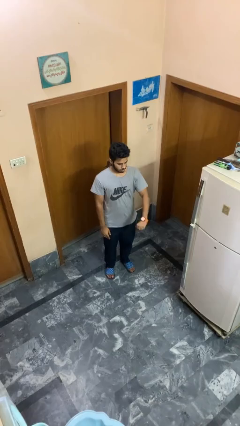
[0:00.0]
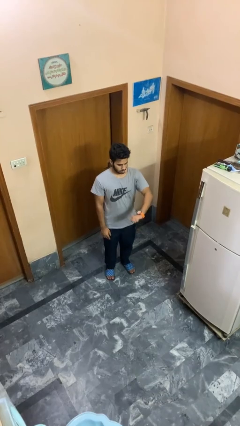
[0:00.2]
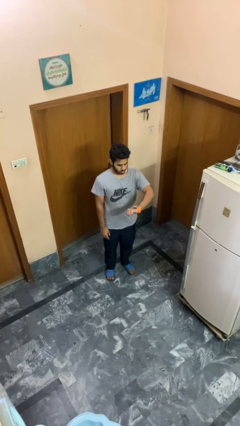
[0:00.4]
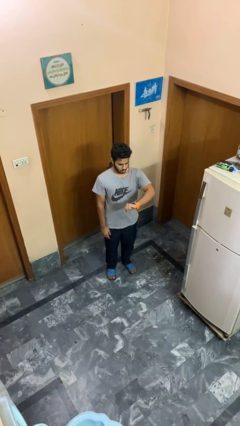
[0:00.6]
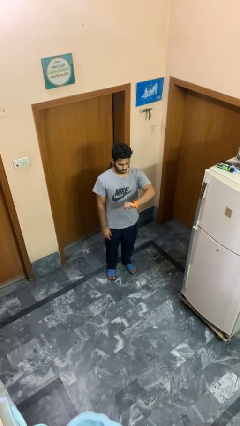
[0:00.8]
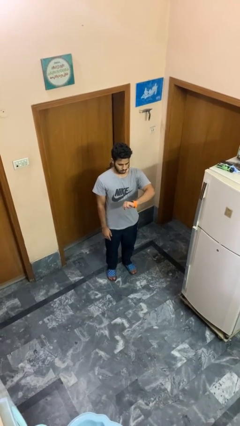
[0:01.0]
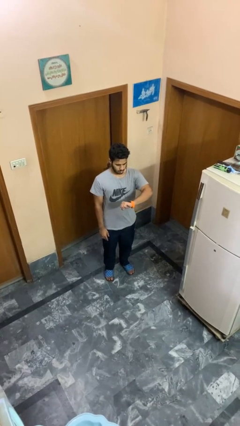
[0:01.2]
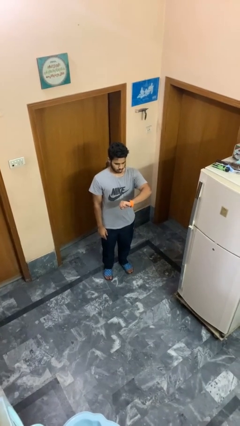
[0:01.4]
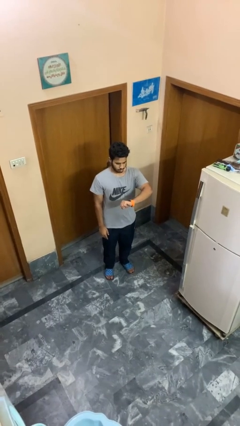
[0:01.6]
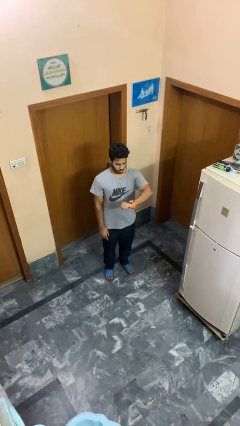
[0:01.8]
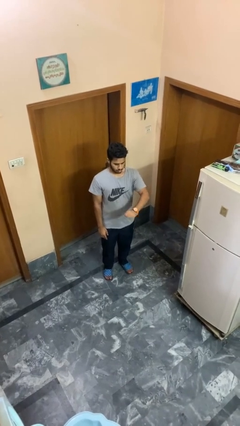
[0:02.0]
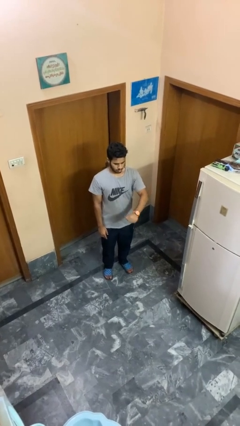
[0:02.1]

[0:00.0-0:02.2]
person looks at wristwatch

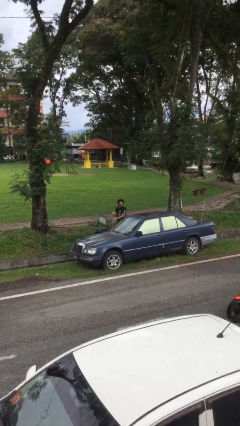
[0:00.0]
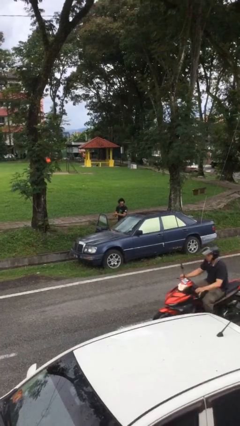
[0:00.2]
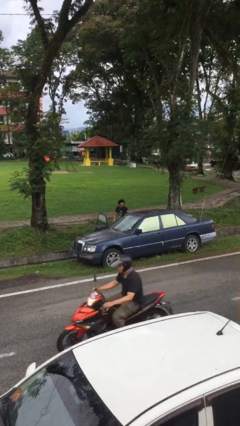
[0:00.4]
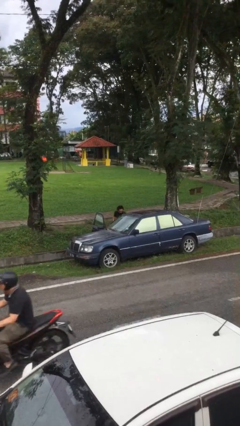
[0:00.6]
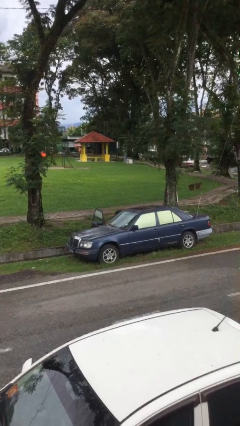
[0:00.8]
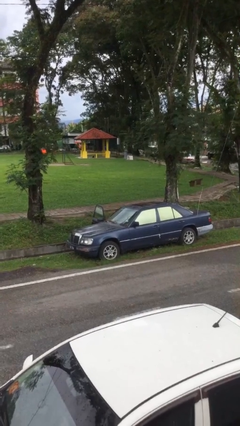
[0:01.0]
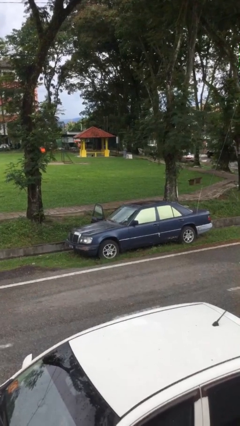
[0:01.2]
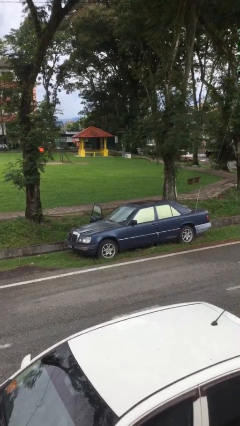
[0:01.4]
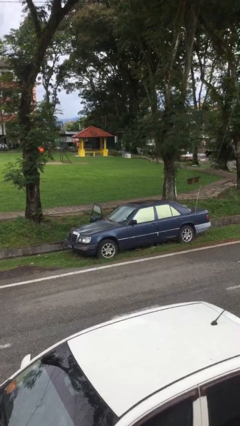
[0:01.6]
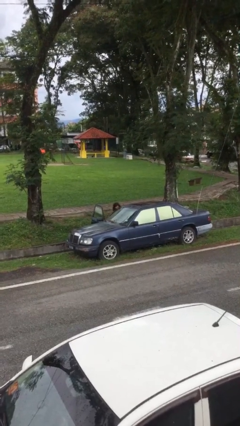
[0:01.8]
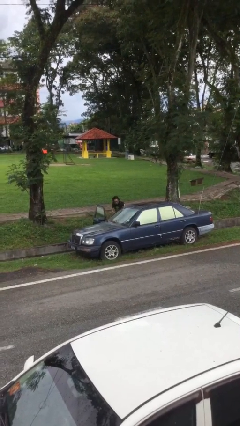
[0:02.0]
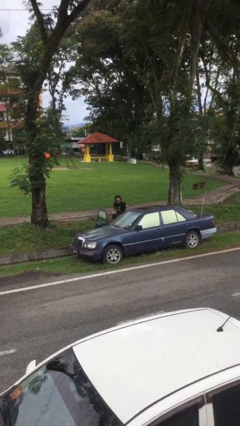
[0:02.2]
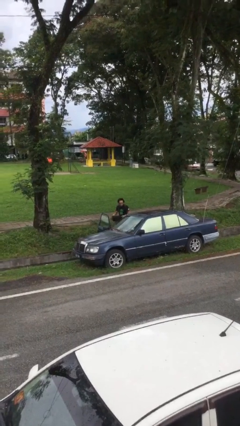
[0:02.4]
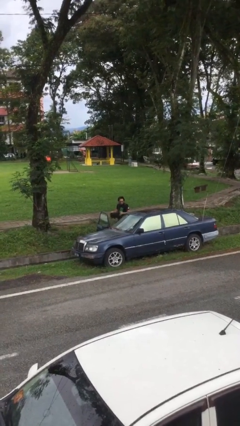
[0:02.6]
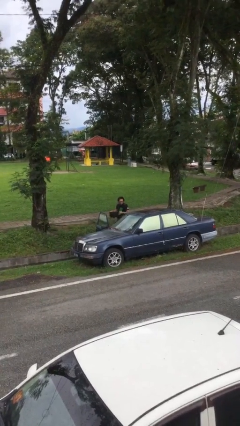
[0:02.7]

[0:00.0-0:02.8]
person unloads car

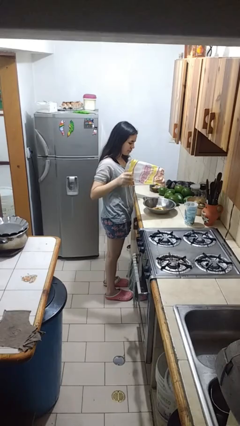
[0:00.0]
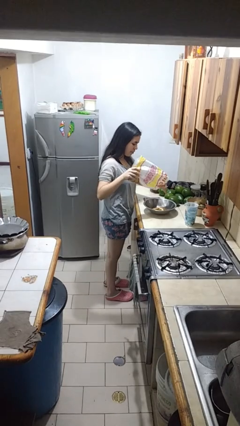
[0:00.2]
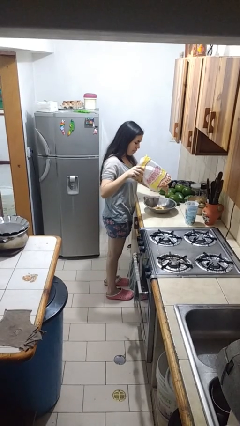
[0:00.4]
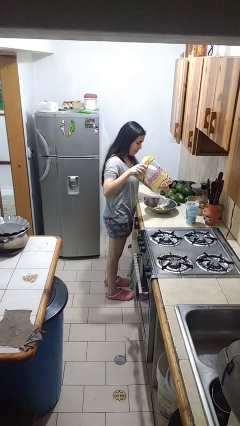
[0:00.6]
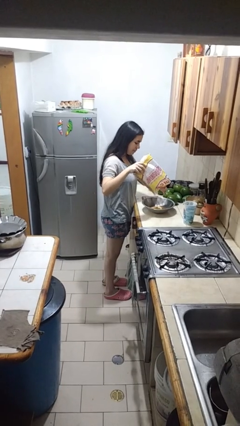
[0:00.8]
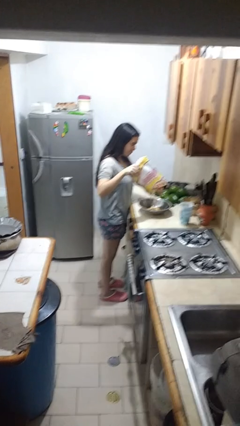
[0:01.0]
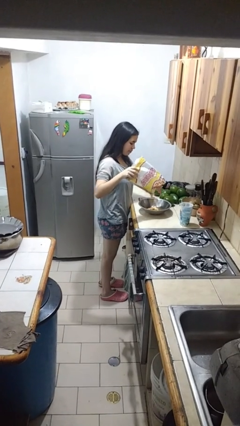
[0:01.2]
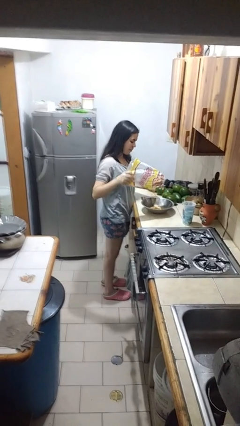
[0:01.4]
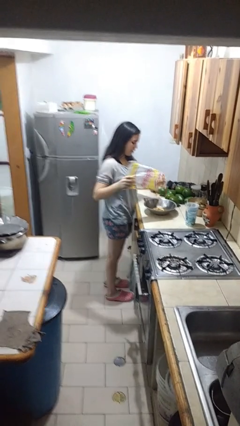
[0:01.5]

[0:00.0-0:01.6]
person pours into bowl

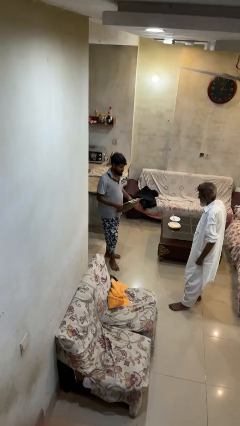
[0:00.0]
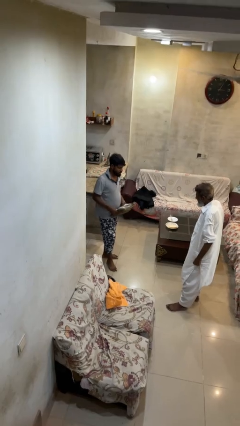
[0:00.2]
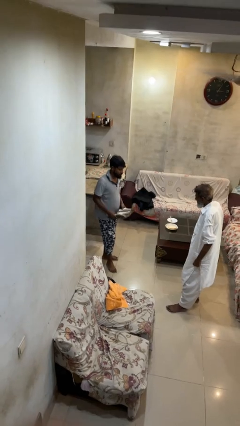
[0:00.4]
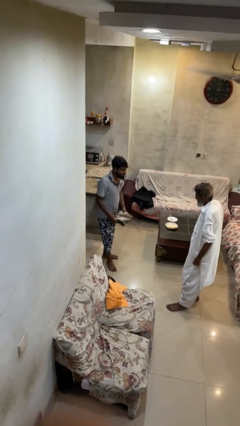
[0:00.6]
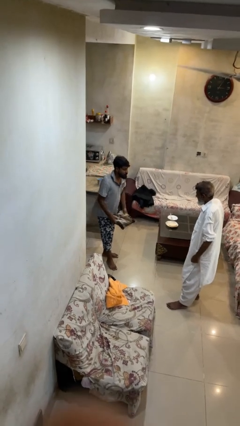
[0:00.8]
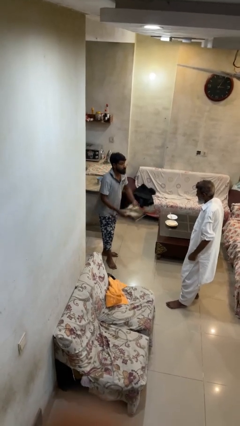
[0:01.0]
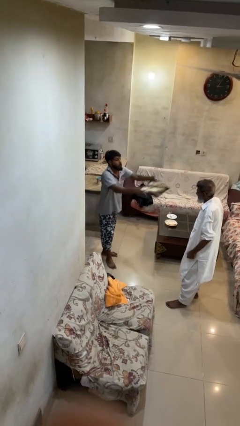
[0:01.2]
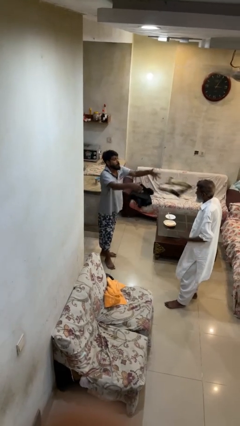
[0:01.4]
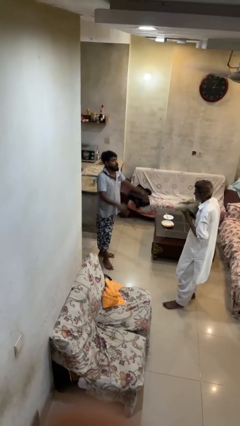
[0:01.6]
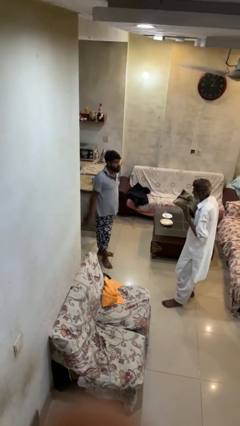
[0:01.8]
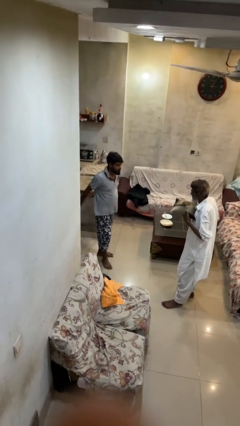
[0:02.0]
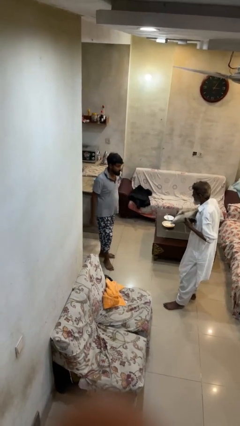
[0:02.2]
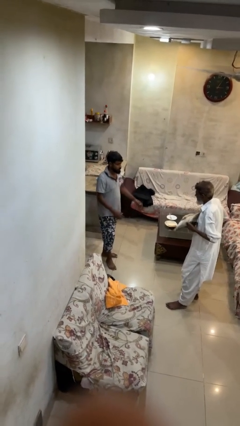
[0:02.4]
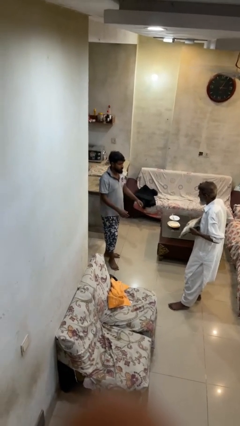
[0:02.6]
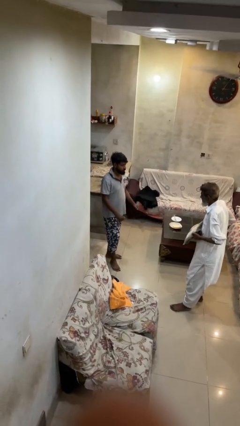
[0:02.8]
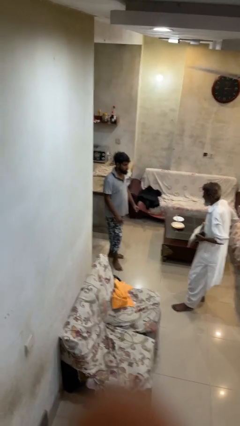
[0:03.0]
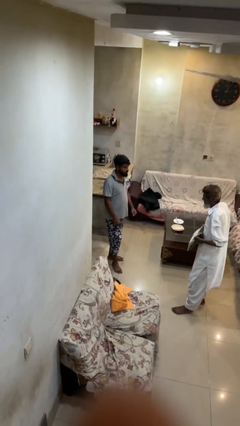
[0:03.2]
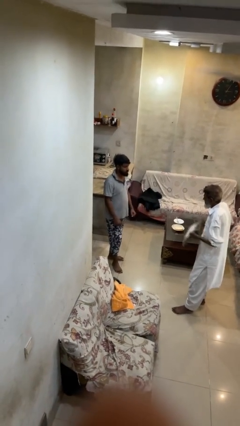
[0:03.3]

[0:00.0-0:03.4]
person throws object to person

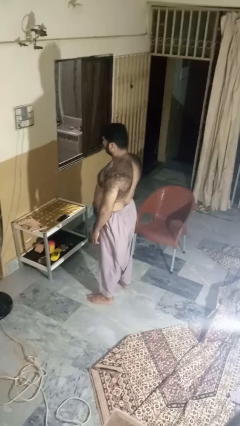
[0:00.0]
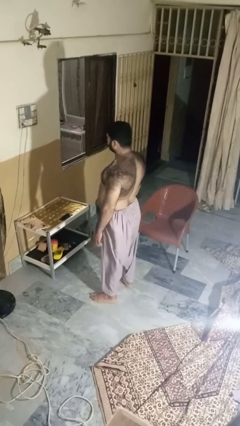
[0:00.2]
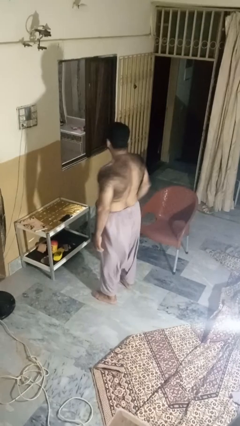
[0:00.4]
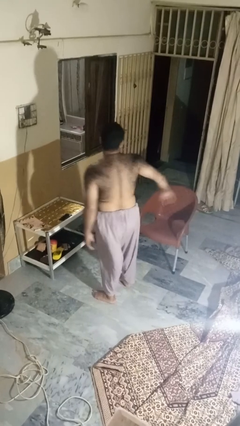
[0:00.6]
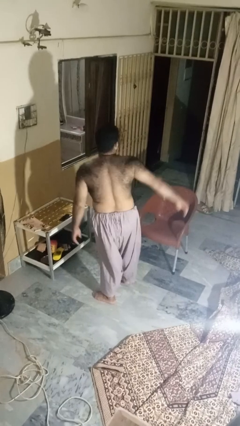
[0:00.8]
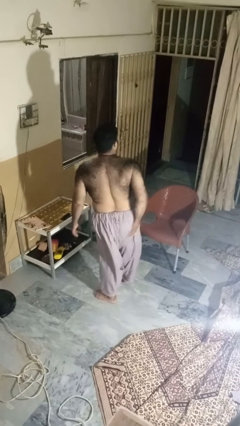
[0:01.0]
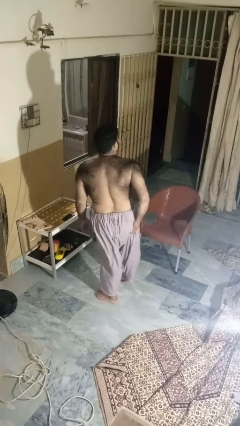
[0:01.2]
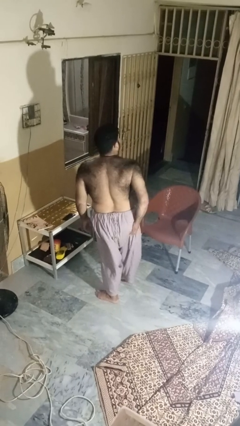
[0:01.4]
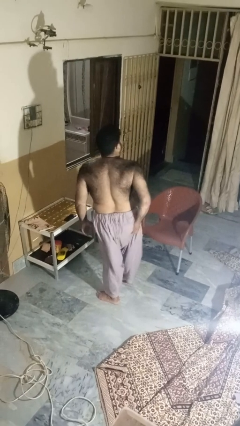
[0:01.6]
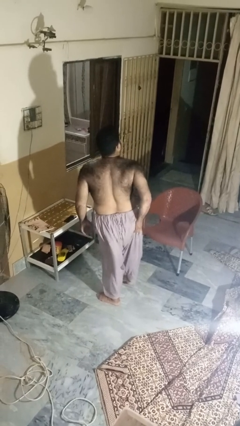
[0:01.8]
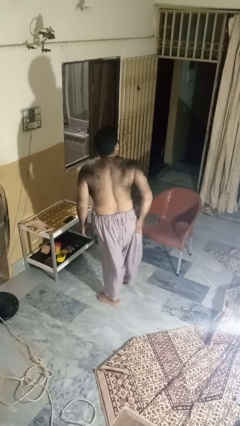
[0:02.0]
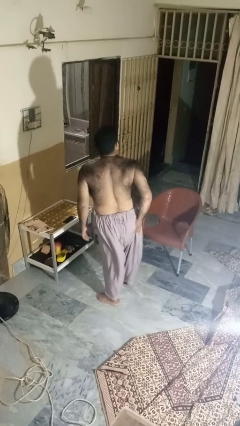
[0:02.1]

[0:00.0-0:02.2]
person wiggles hips

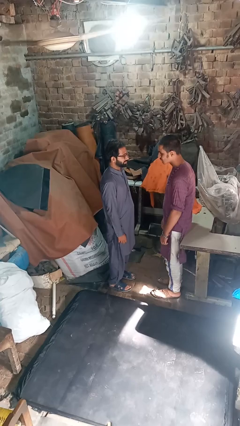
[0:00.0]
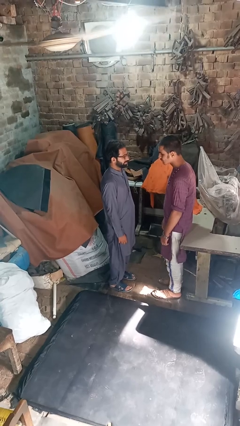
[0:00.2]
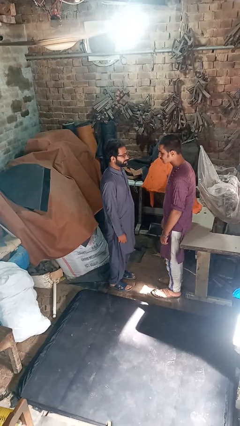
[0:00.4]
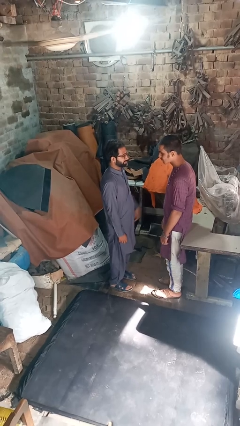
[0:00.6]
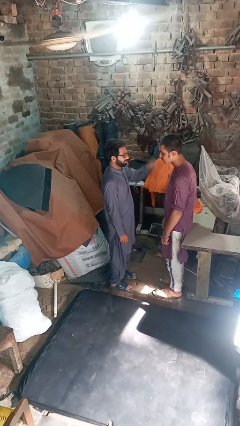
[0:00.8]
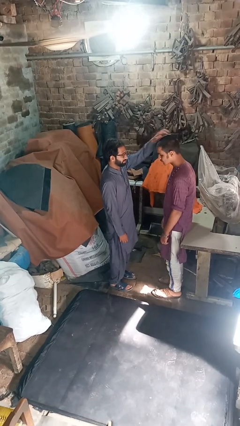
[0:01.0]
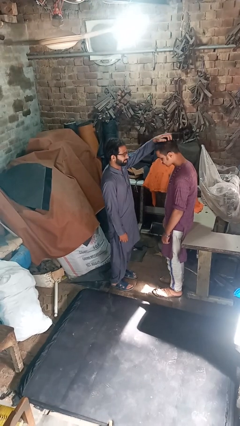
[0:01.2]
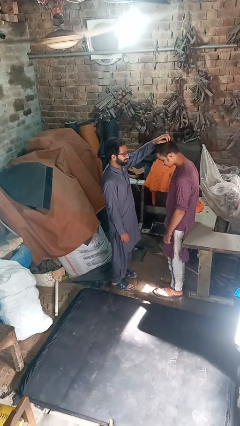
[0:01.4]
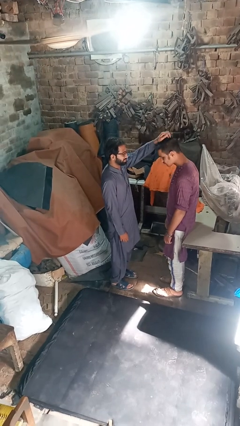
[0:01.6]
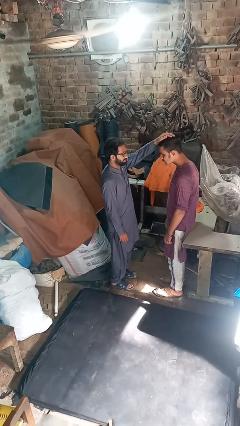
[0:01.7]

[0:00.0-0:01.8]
person grabs person by hair

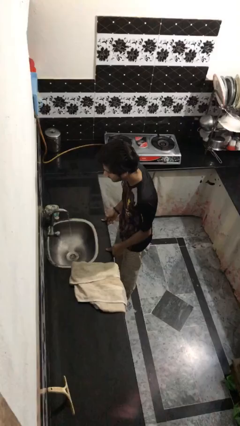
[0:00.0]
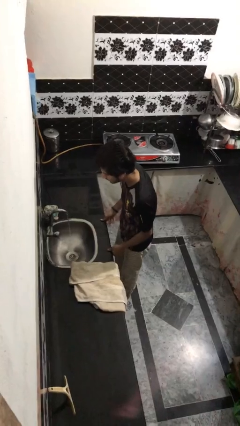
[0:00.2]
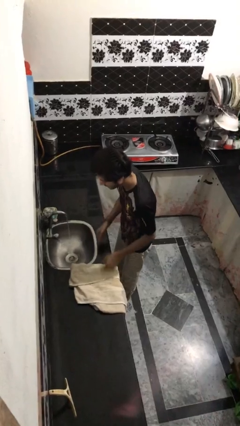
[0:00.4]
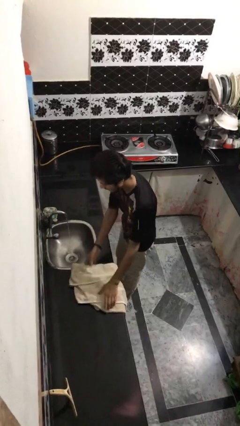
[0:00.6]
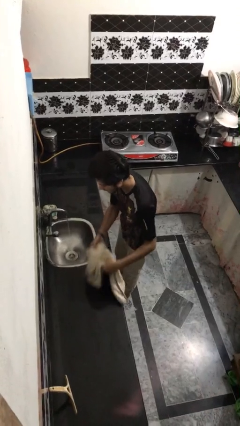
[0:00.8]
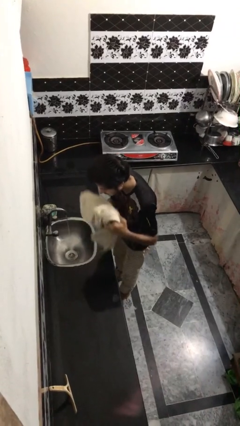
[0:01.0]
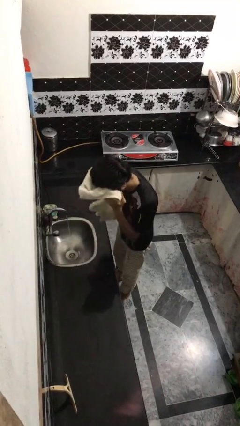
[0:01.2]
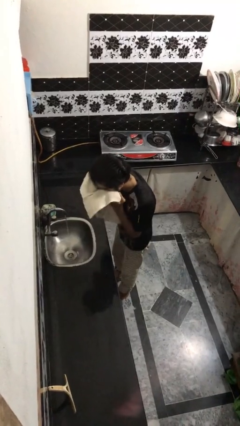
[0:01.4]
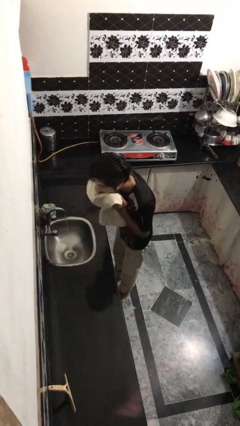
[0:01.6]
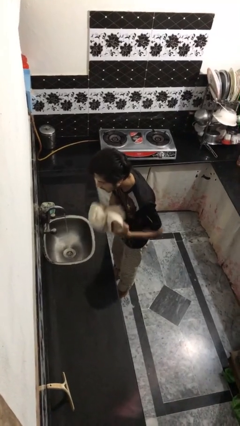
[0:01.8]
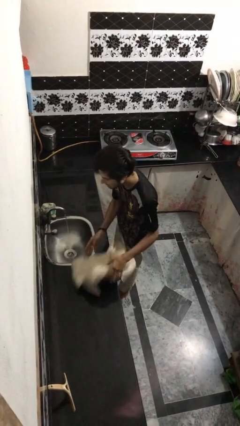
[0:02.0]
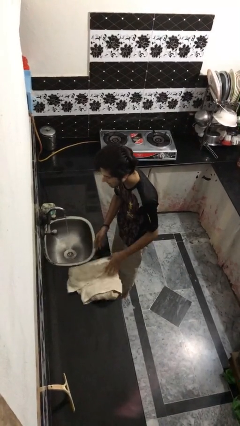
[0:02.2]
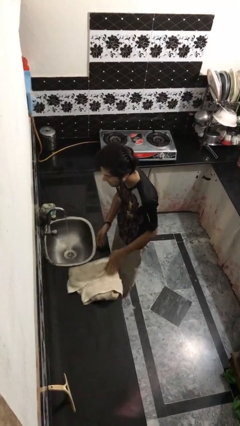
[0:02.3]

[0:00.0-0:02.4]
person dries face with towel

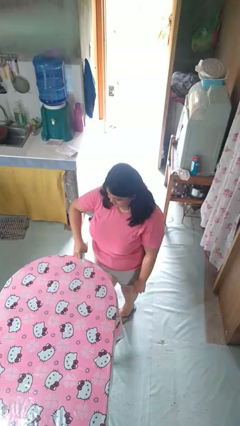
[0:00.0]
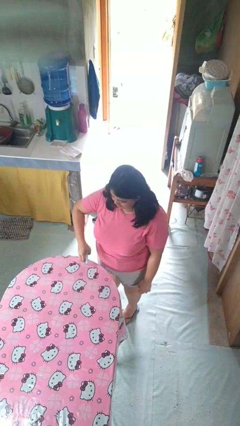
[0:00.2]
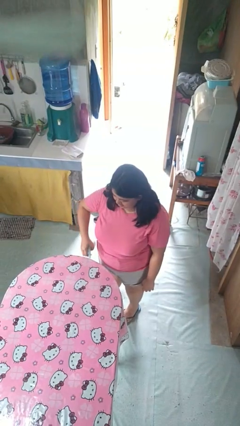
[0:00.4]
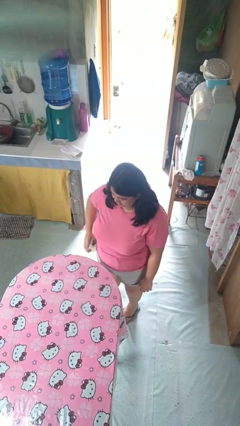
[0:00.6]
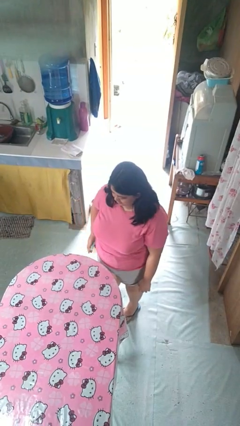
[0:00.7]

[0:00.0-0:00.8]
person sprays from bottle
